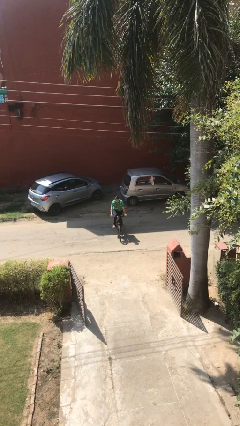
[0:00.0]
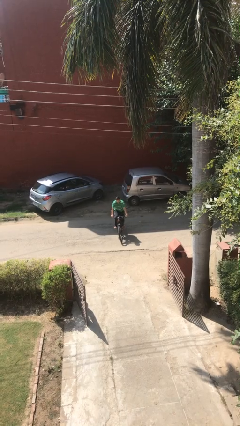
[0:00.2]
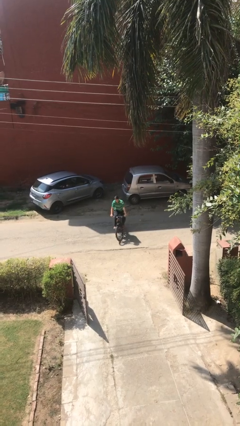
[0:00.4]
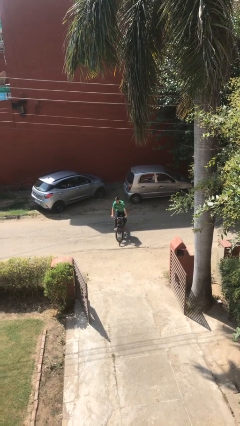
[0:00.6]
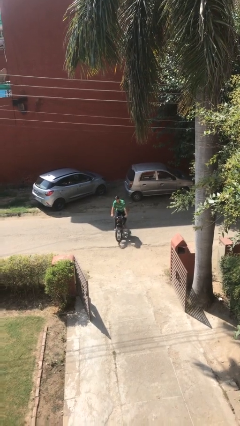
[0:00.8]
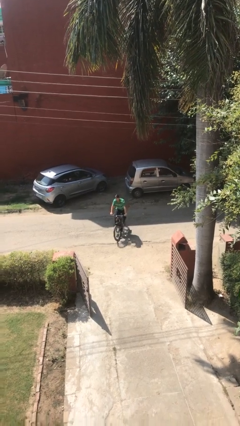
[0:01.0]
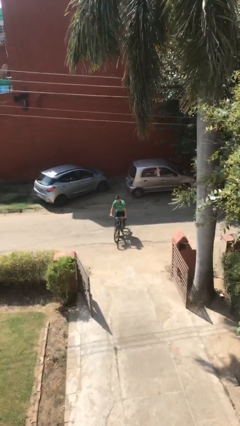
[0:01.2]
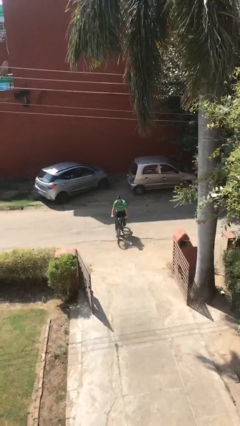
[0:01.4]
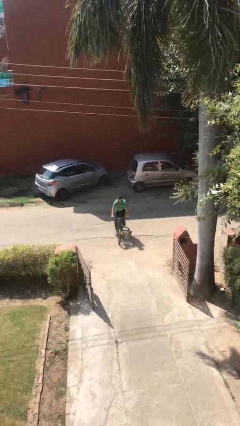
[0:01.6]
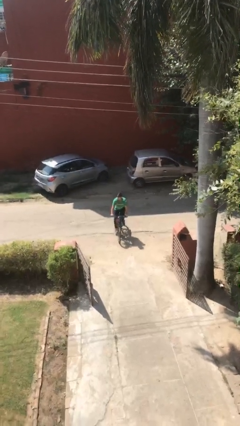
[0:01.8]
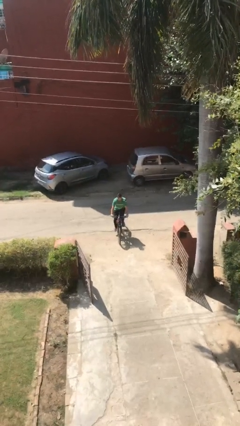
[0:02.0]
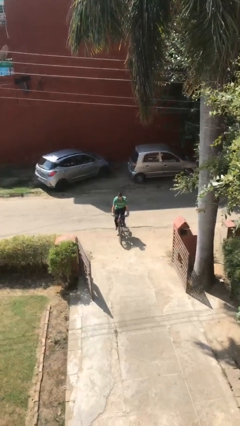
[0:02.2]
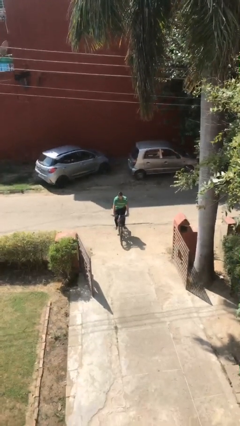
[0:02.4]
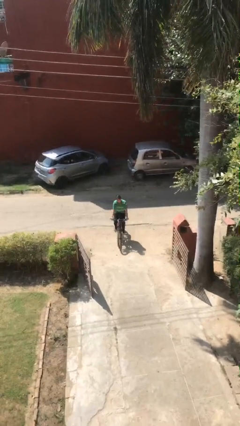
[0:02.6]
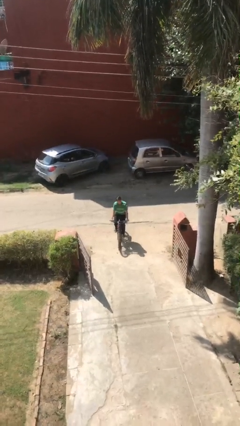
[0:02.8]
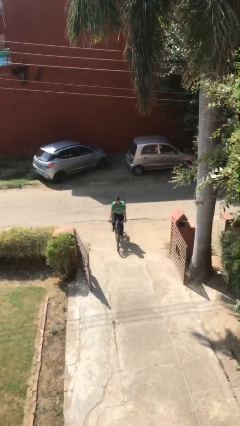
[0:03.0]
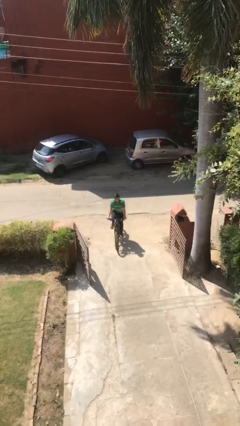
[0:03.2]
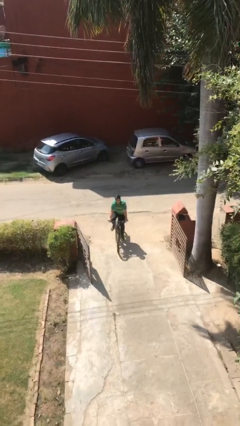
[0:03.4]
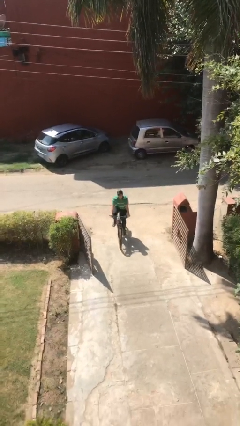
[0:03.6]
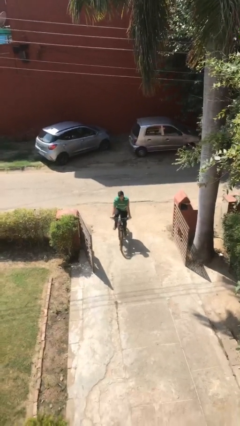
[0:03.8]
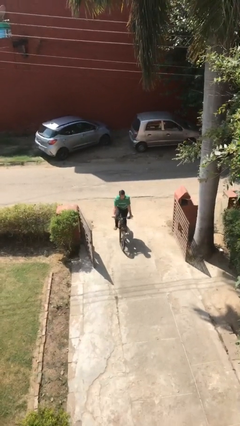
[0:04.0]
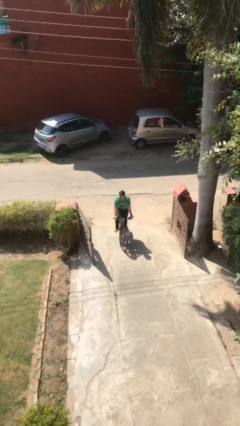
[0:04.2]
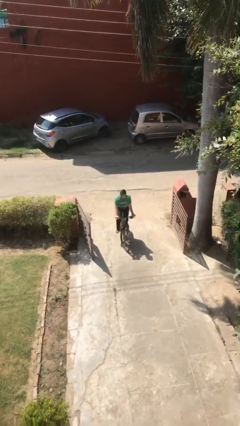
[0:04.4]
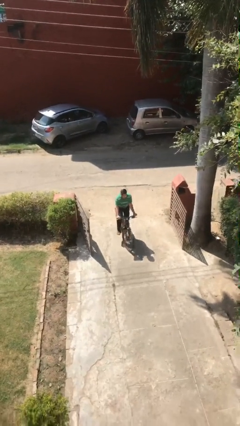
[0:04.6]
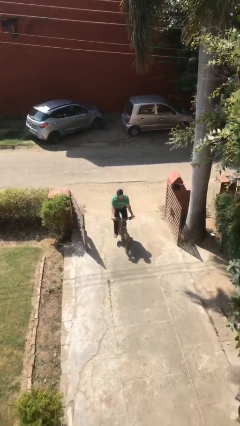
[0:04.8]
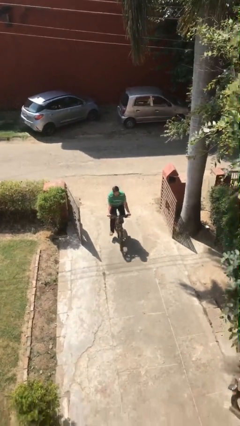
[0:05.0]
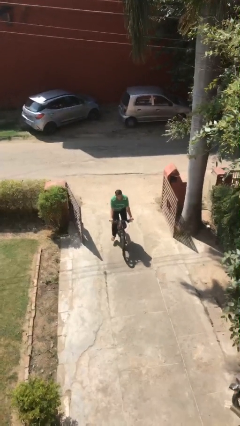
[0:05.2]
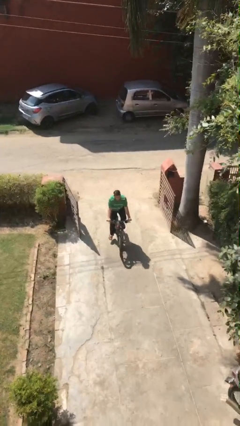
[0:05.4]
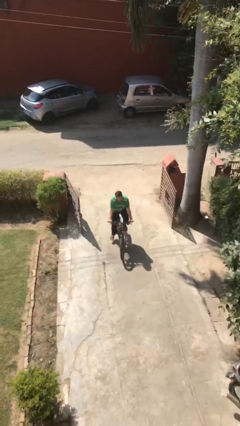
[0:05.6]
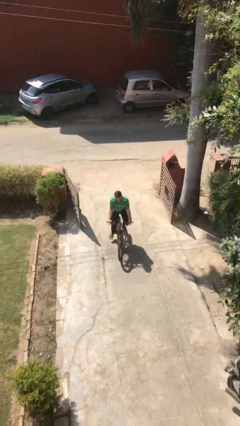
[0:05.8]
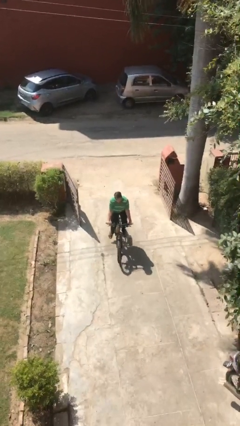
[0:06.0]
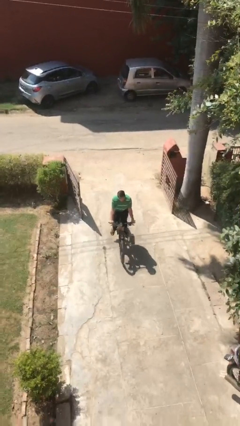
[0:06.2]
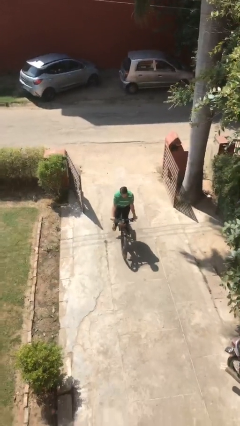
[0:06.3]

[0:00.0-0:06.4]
person rides bicycle

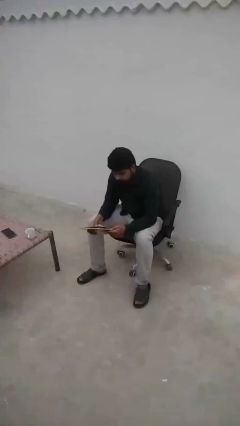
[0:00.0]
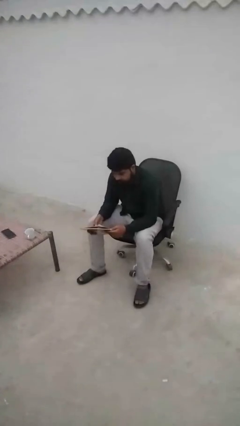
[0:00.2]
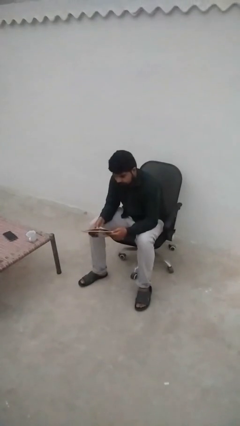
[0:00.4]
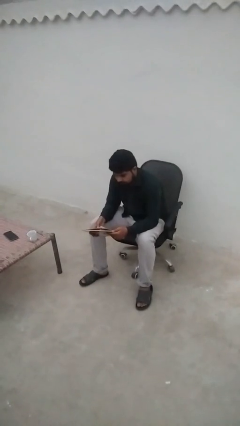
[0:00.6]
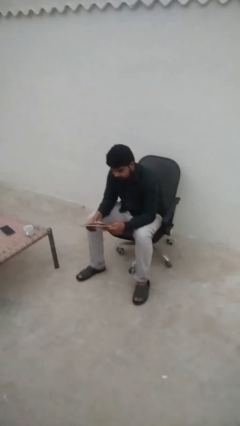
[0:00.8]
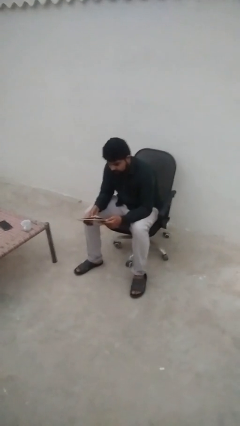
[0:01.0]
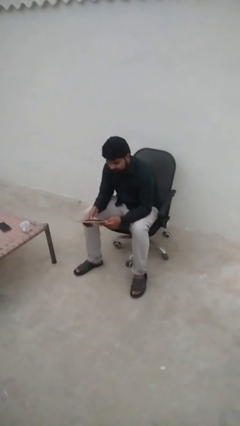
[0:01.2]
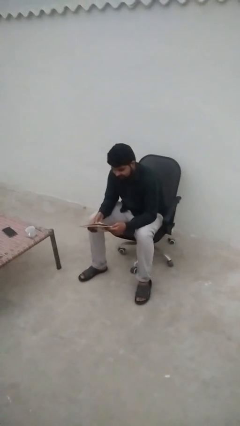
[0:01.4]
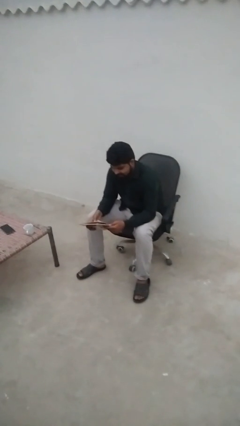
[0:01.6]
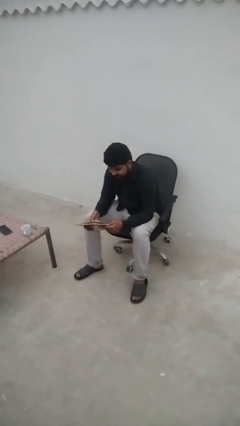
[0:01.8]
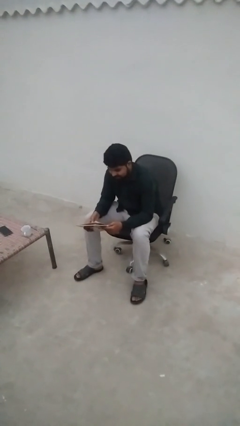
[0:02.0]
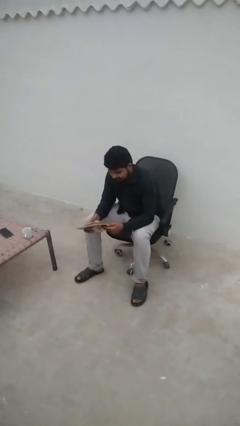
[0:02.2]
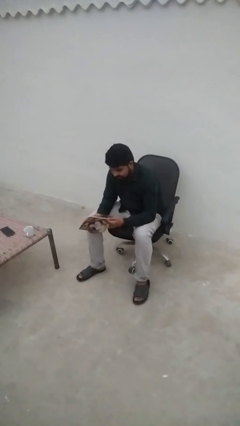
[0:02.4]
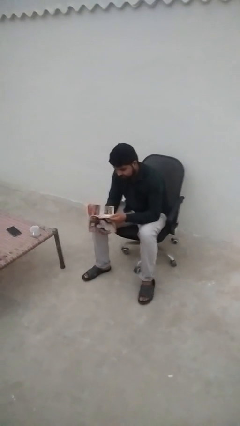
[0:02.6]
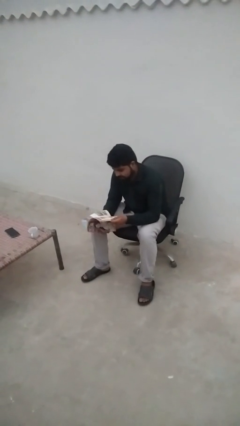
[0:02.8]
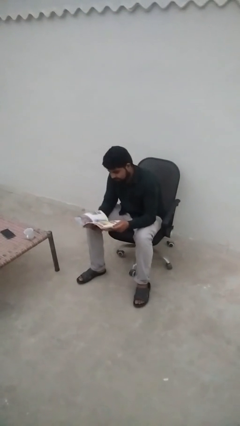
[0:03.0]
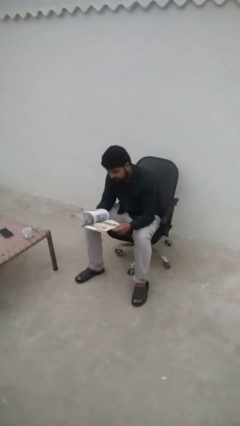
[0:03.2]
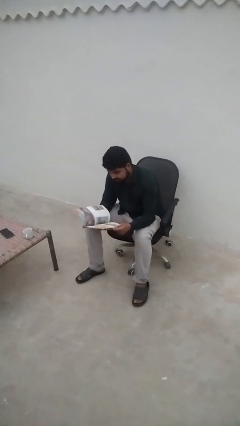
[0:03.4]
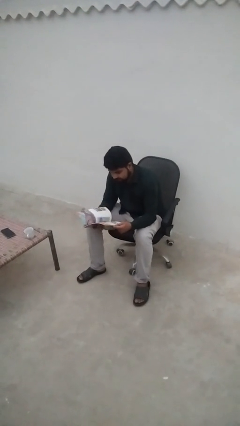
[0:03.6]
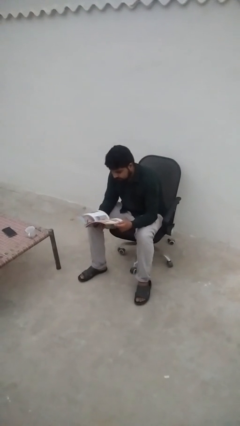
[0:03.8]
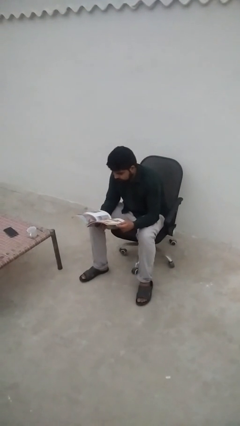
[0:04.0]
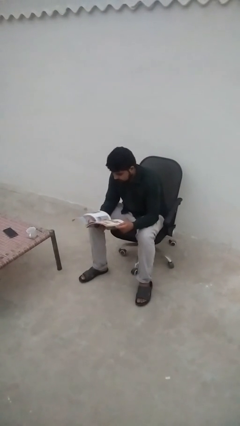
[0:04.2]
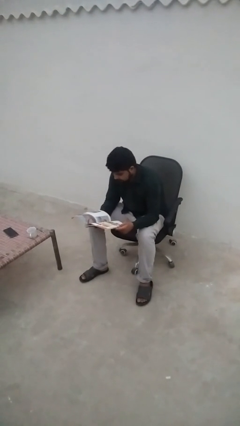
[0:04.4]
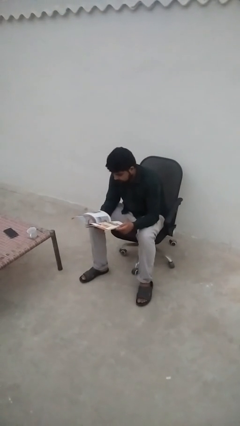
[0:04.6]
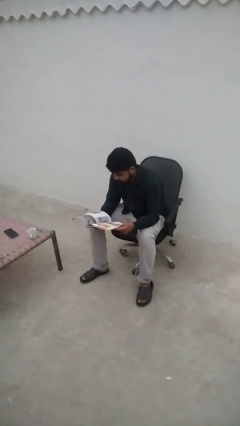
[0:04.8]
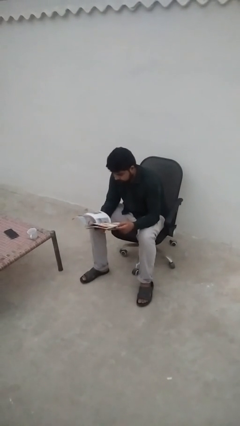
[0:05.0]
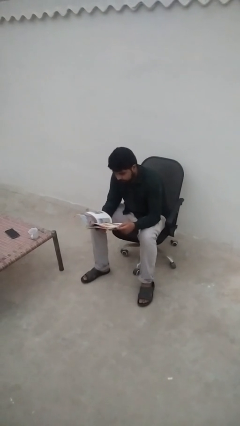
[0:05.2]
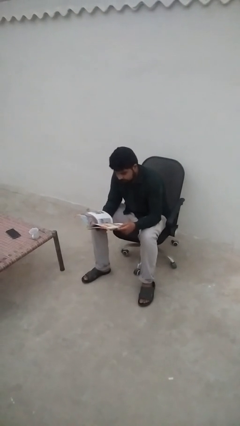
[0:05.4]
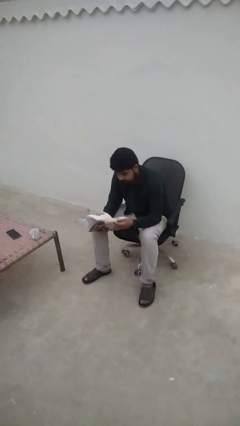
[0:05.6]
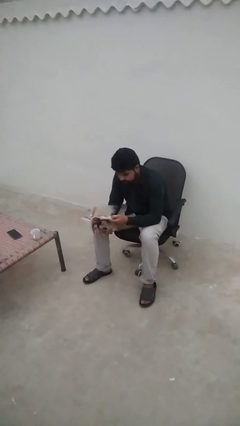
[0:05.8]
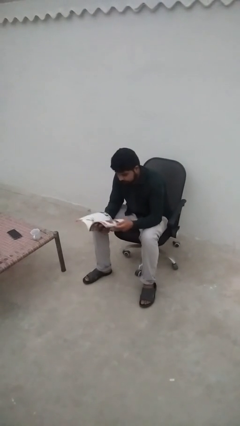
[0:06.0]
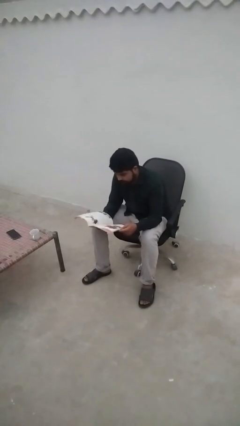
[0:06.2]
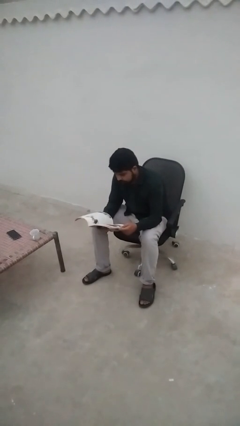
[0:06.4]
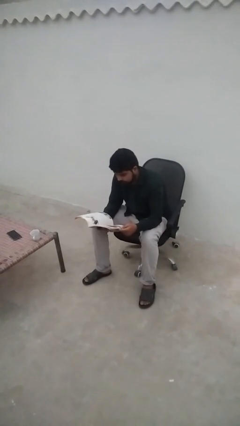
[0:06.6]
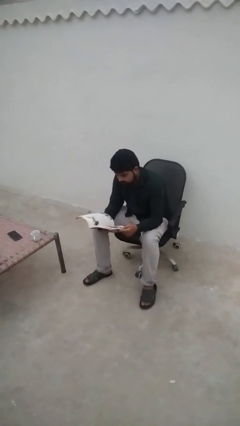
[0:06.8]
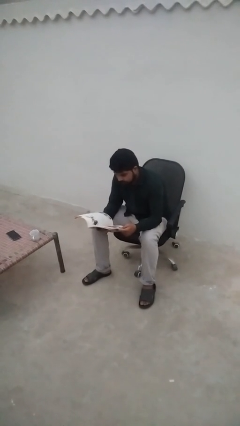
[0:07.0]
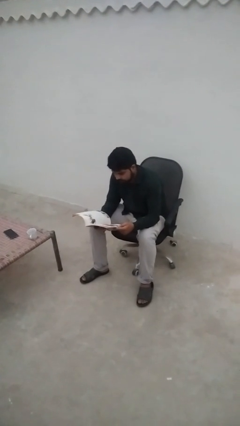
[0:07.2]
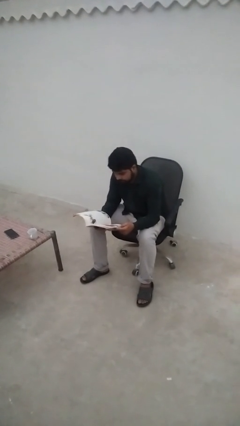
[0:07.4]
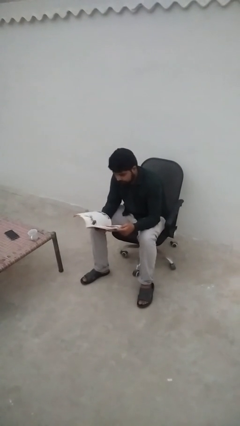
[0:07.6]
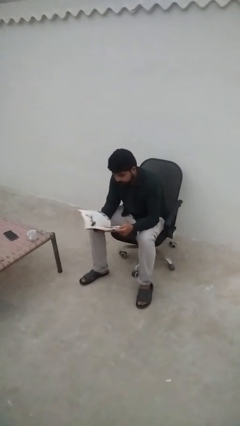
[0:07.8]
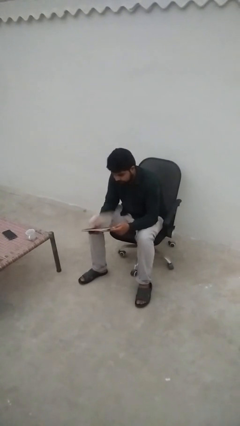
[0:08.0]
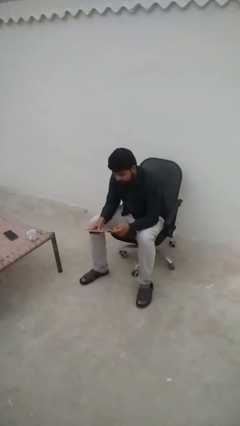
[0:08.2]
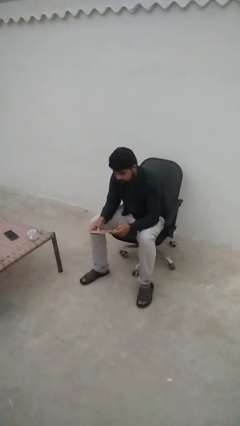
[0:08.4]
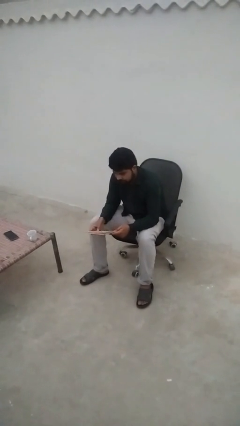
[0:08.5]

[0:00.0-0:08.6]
person reads magazine

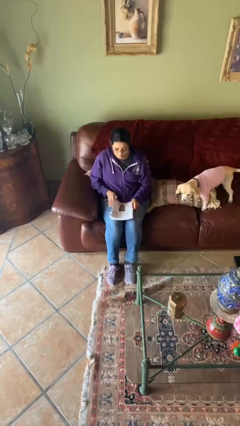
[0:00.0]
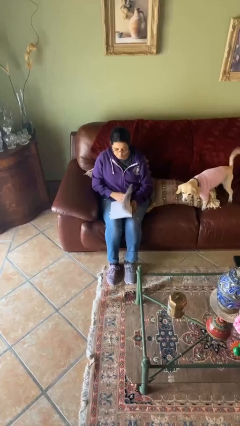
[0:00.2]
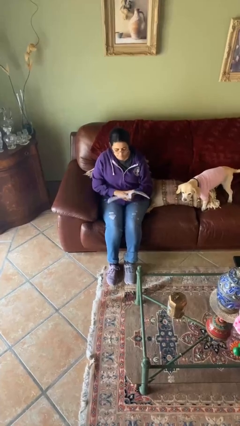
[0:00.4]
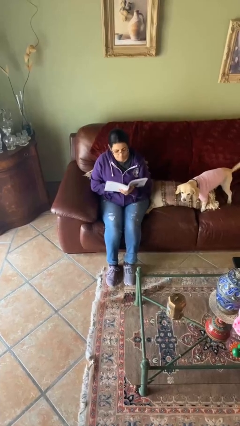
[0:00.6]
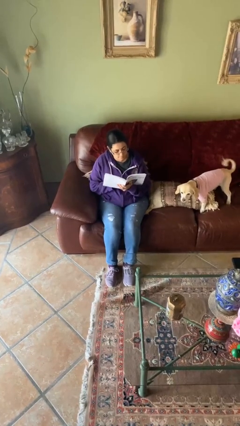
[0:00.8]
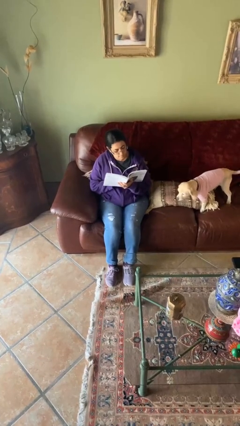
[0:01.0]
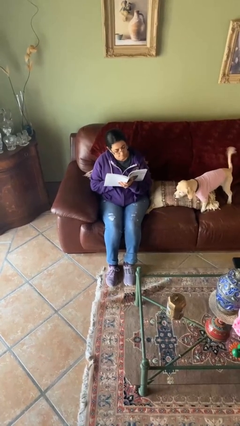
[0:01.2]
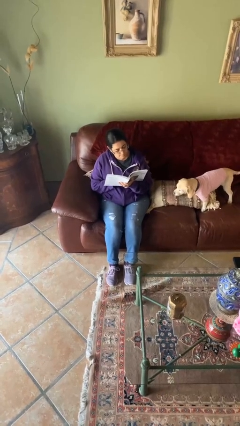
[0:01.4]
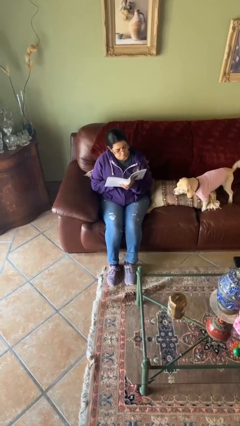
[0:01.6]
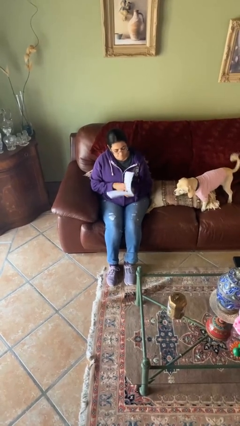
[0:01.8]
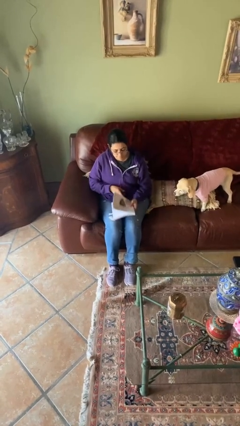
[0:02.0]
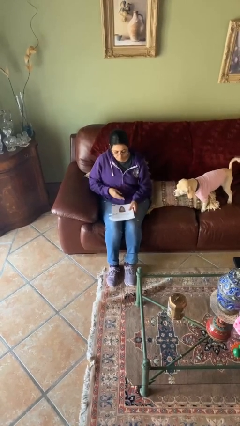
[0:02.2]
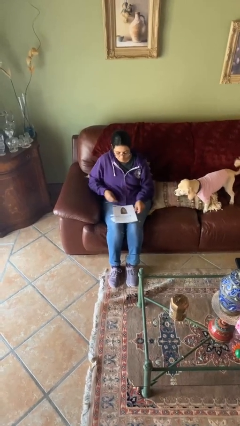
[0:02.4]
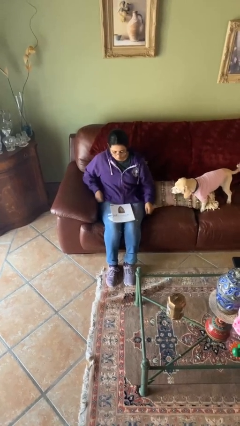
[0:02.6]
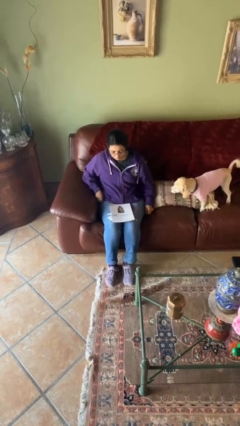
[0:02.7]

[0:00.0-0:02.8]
person reads document
